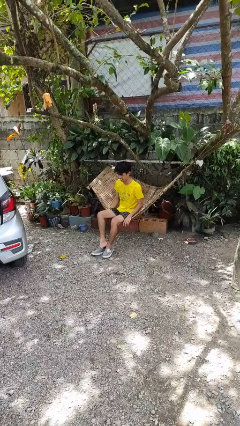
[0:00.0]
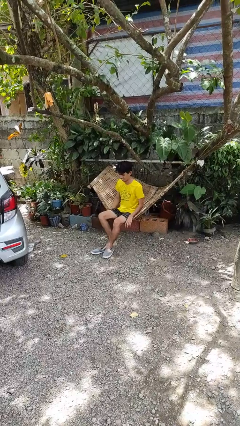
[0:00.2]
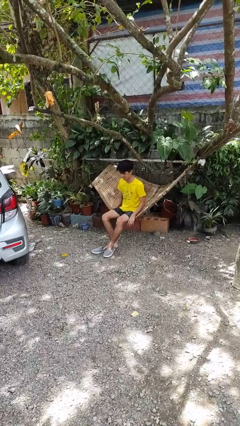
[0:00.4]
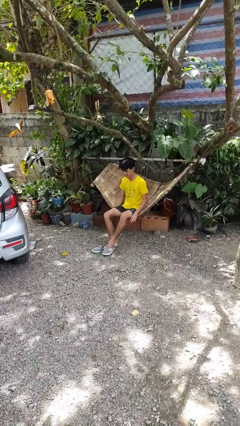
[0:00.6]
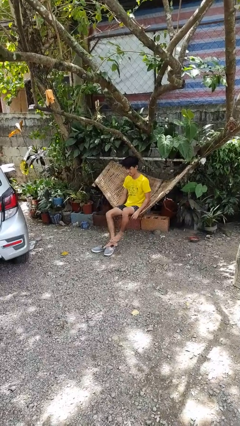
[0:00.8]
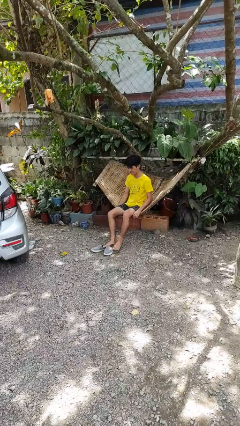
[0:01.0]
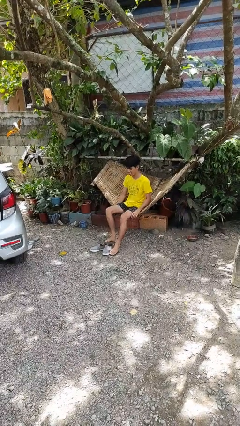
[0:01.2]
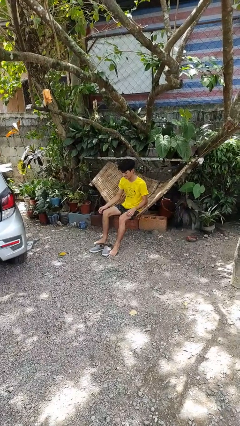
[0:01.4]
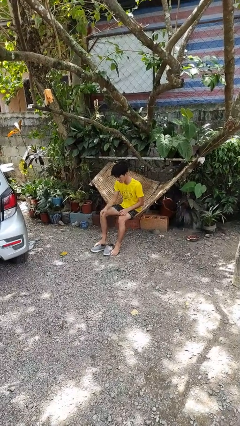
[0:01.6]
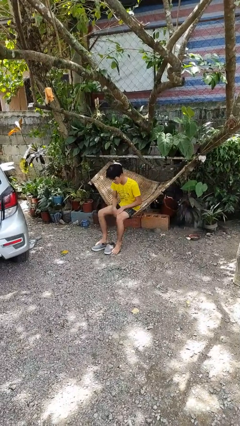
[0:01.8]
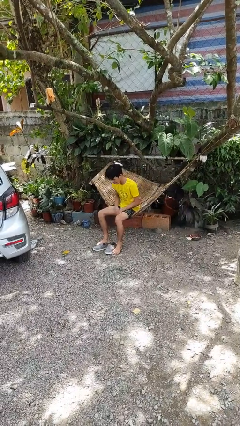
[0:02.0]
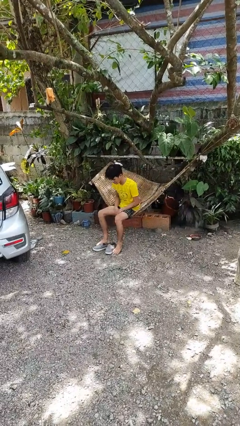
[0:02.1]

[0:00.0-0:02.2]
person takes off shoes

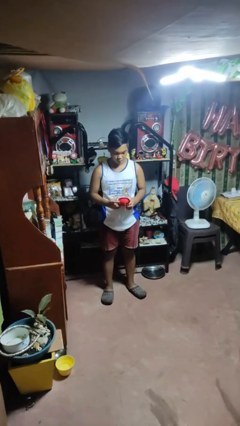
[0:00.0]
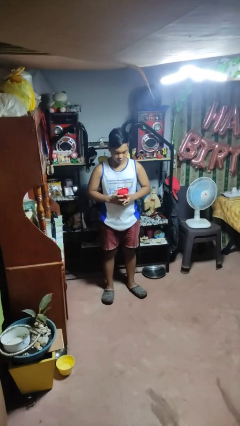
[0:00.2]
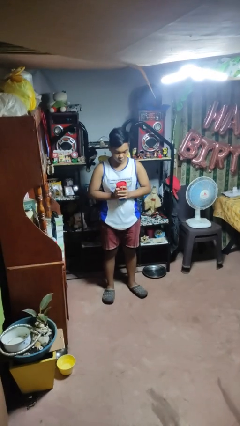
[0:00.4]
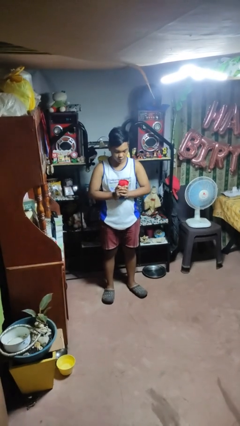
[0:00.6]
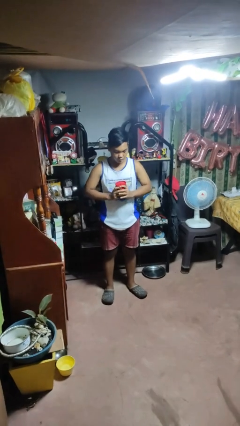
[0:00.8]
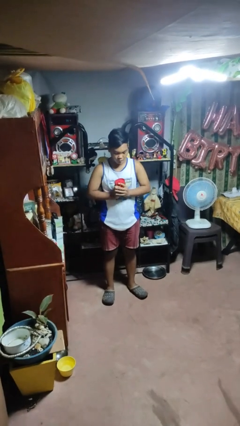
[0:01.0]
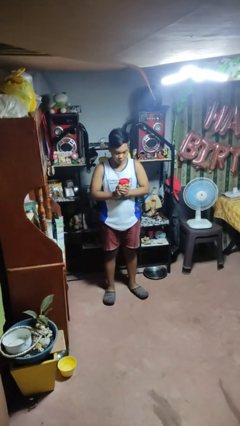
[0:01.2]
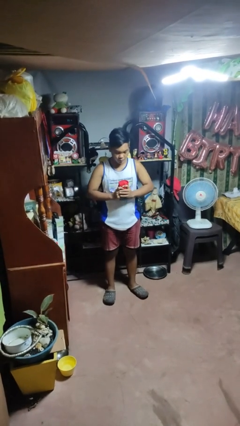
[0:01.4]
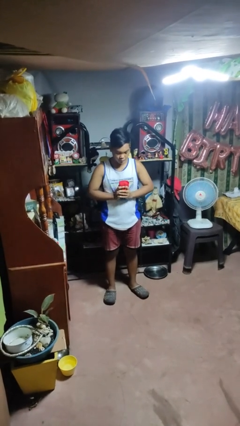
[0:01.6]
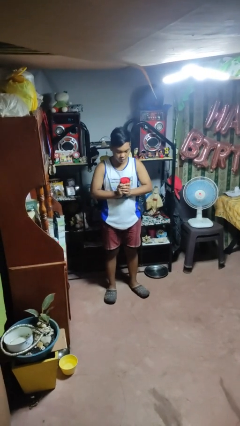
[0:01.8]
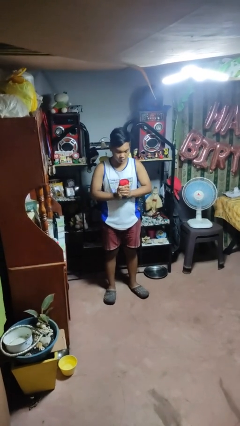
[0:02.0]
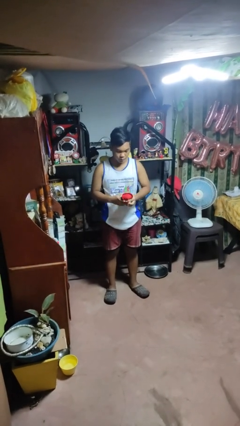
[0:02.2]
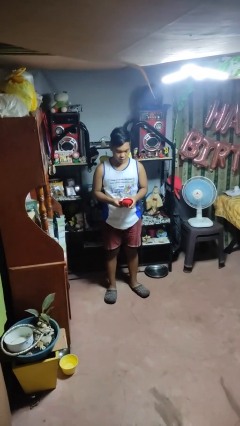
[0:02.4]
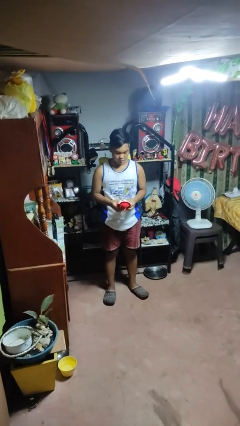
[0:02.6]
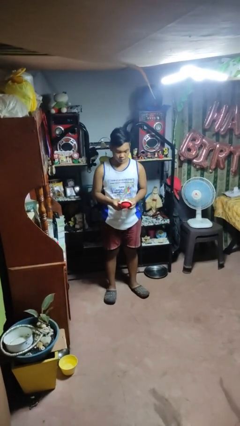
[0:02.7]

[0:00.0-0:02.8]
person squeezes object

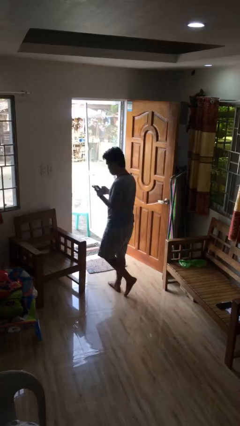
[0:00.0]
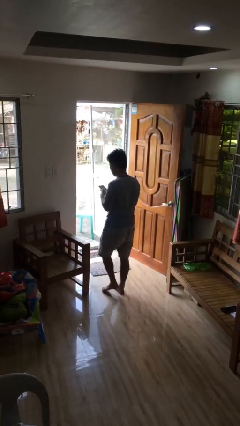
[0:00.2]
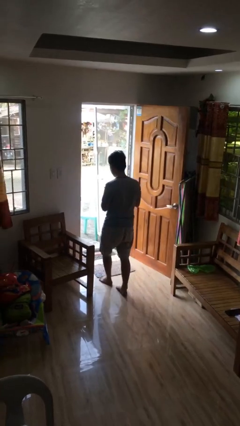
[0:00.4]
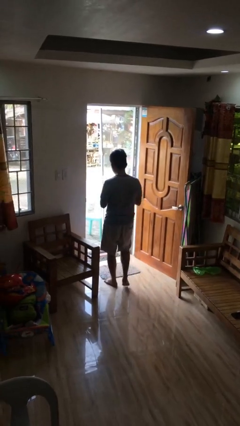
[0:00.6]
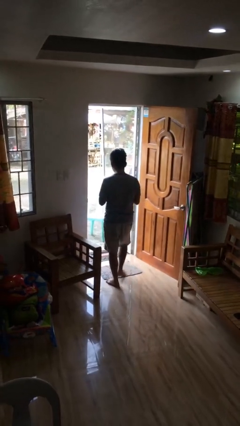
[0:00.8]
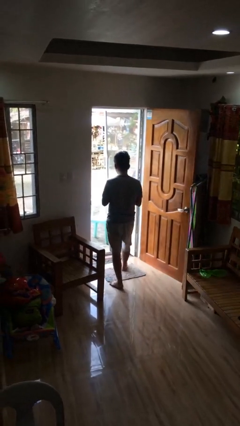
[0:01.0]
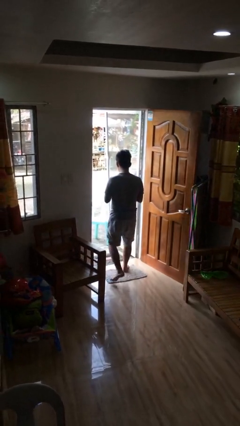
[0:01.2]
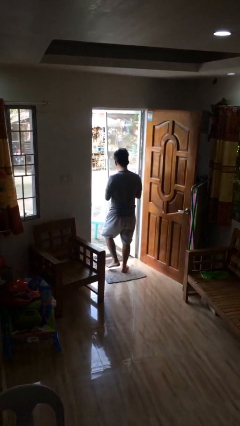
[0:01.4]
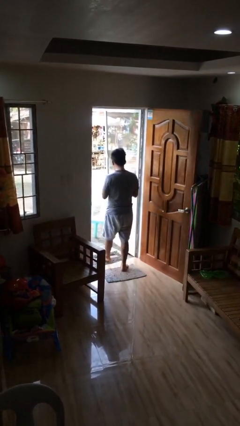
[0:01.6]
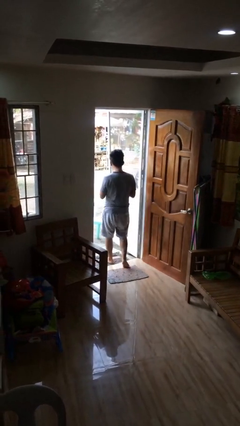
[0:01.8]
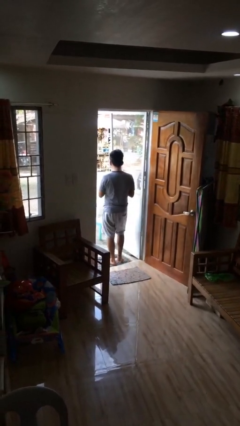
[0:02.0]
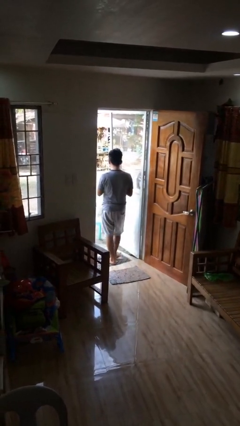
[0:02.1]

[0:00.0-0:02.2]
person exits scene through structure

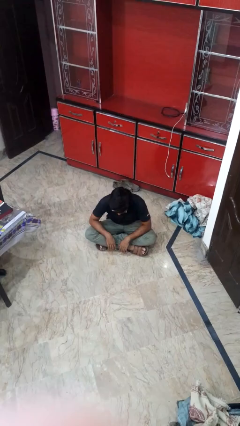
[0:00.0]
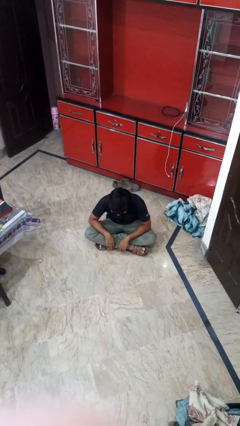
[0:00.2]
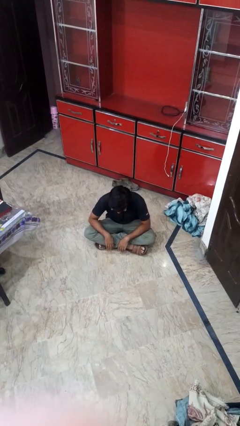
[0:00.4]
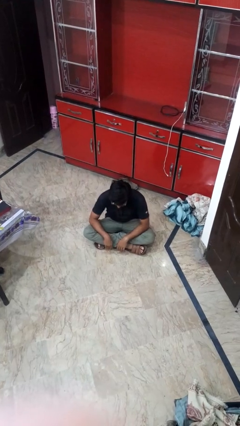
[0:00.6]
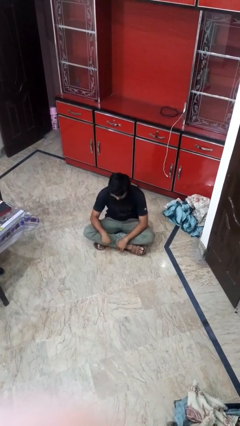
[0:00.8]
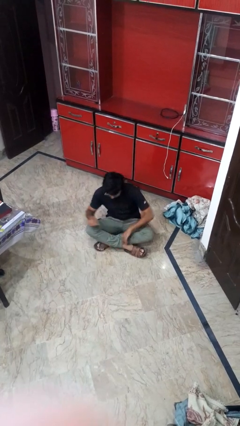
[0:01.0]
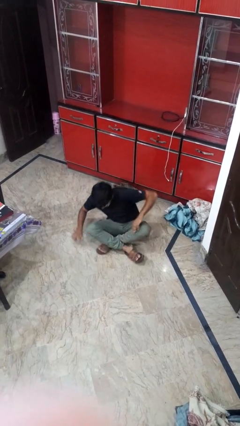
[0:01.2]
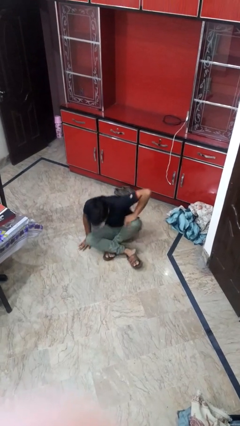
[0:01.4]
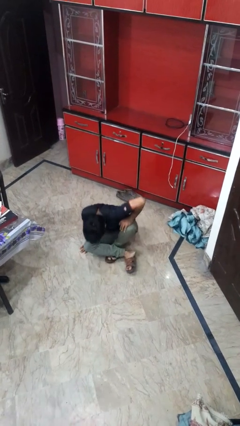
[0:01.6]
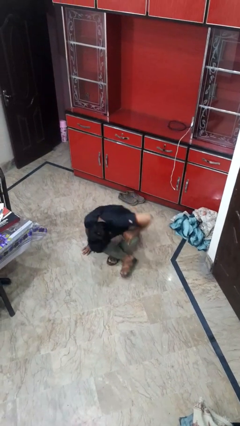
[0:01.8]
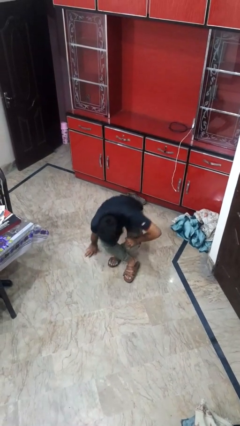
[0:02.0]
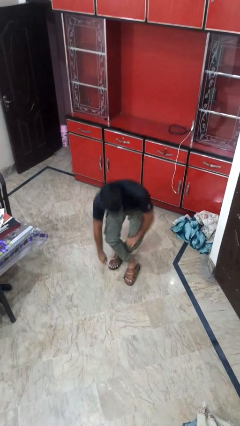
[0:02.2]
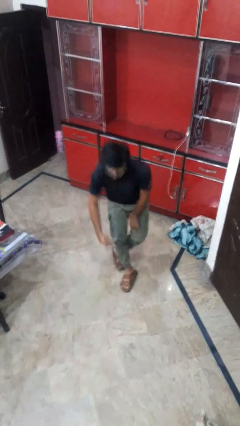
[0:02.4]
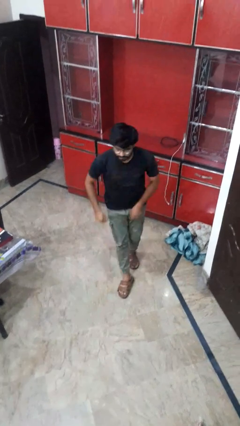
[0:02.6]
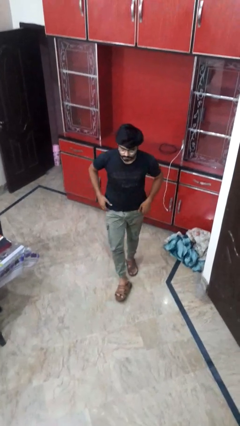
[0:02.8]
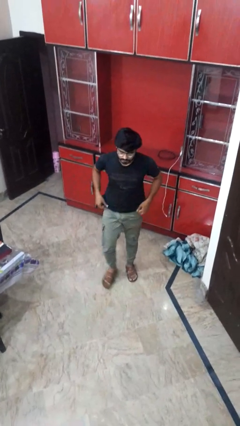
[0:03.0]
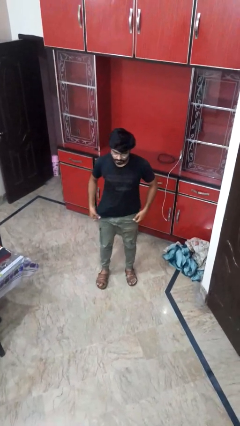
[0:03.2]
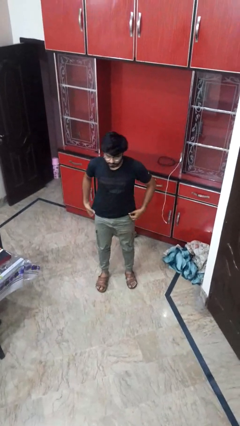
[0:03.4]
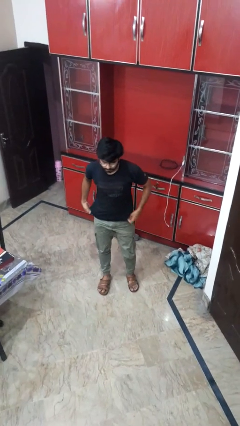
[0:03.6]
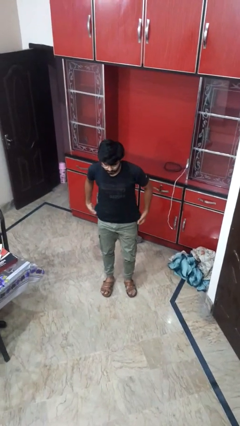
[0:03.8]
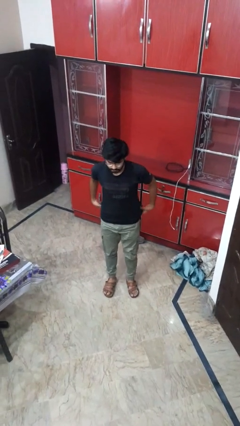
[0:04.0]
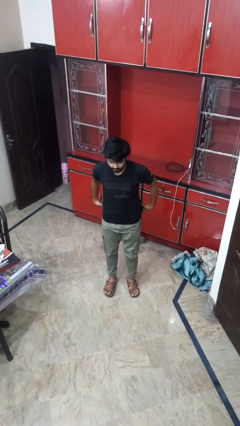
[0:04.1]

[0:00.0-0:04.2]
person stands up from floor

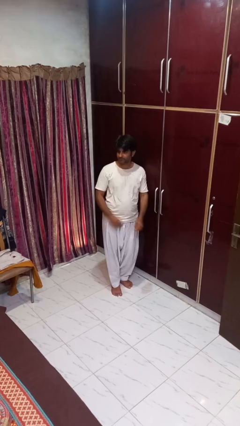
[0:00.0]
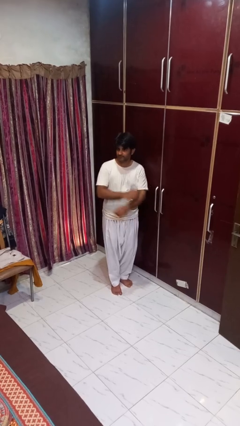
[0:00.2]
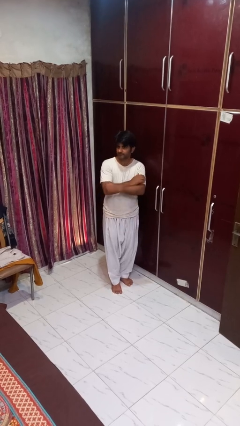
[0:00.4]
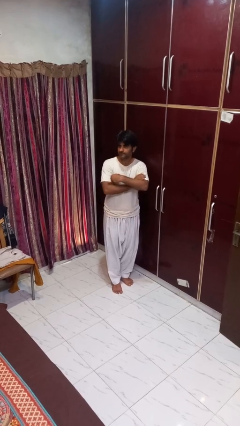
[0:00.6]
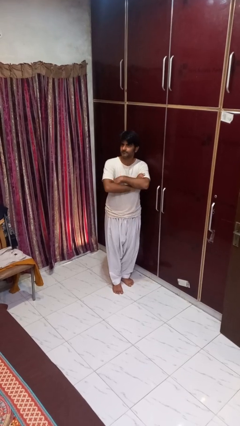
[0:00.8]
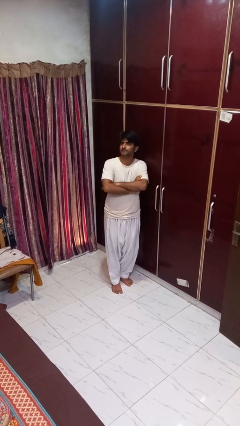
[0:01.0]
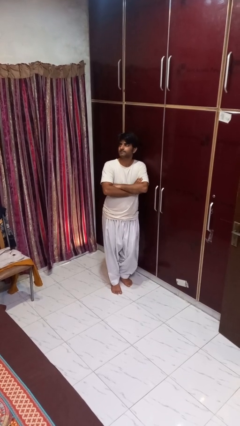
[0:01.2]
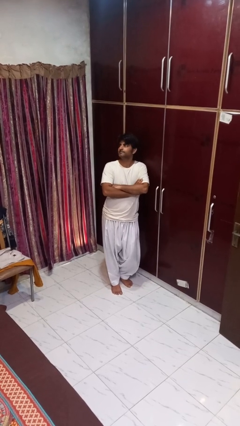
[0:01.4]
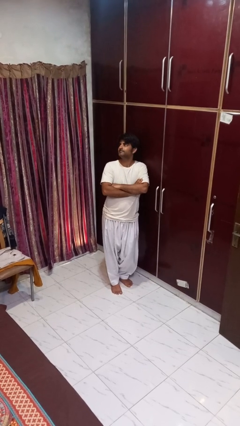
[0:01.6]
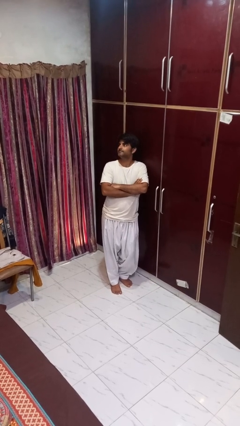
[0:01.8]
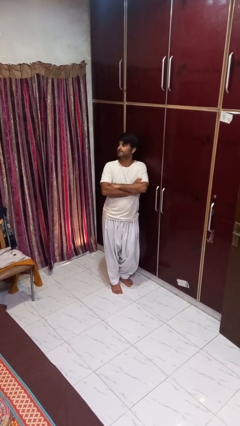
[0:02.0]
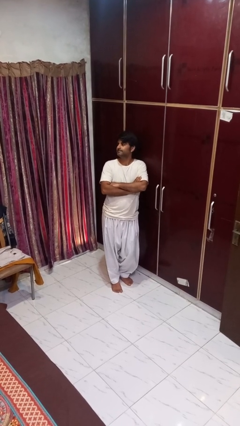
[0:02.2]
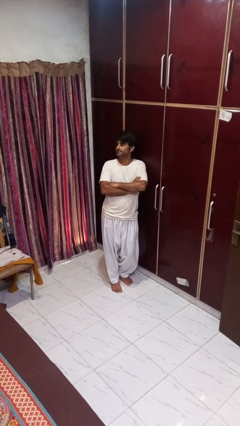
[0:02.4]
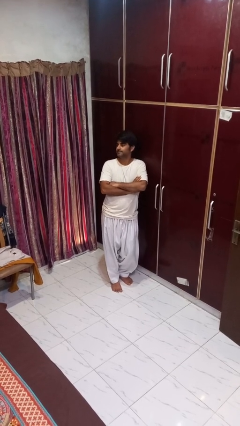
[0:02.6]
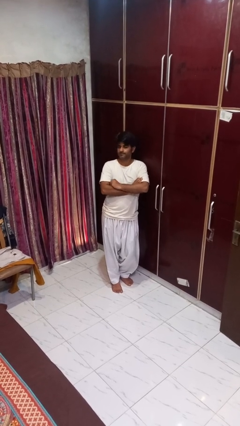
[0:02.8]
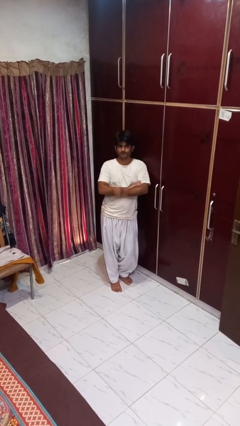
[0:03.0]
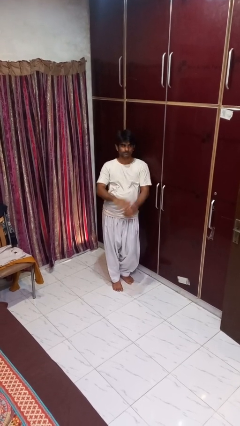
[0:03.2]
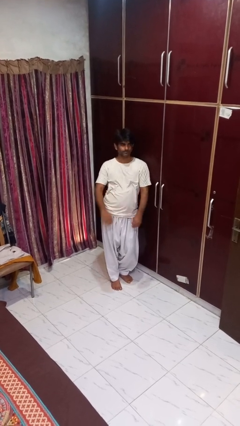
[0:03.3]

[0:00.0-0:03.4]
person crosses arms

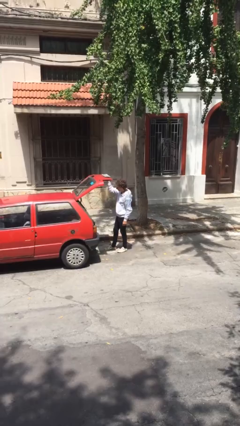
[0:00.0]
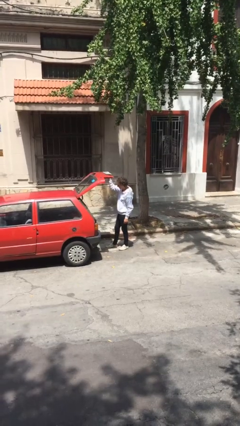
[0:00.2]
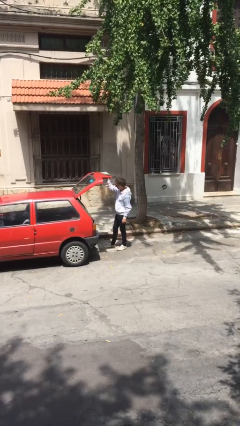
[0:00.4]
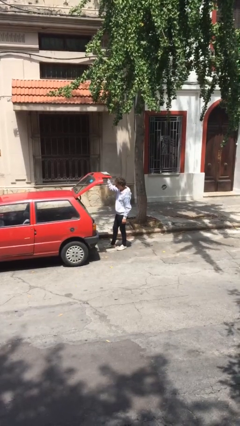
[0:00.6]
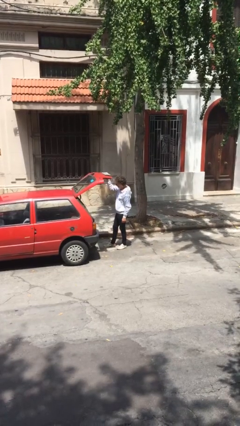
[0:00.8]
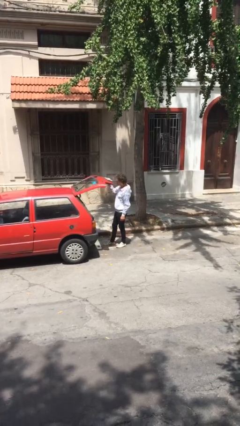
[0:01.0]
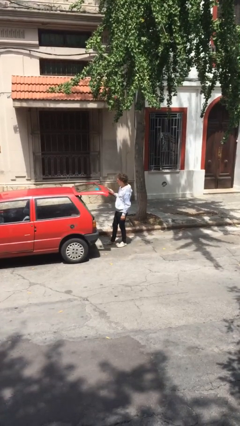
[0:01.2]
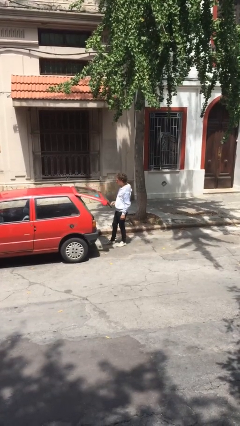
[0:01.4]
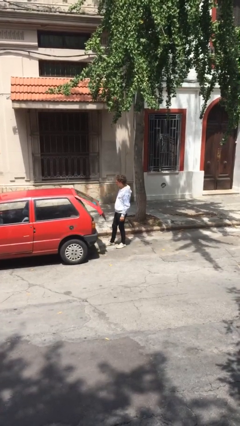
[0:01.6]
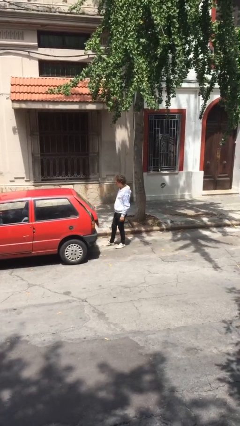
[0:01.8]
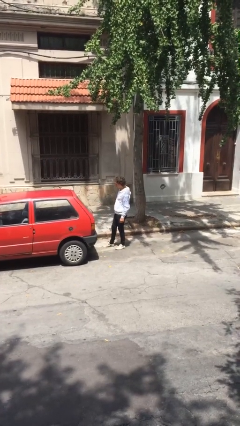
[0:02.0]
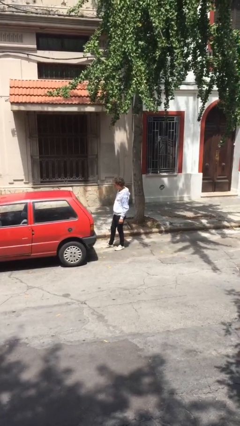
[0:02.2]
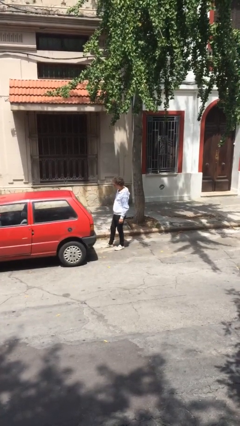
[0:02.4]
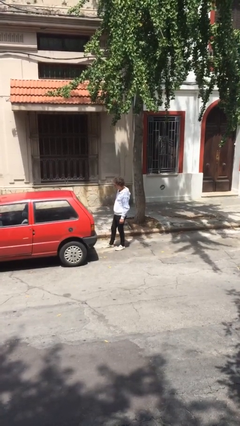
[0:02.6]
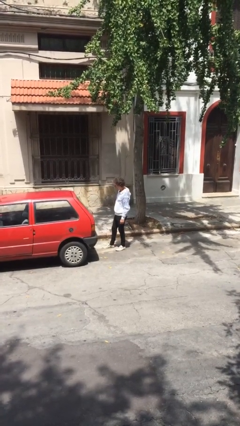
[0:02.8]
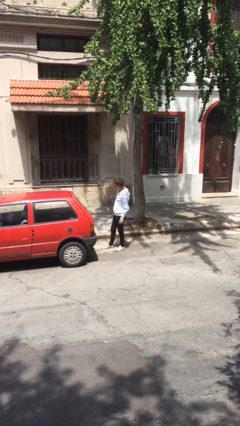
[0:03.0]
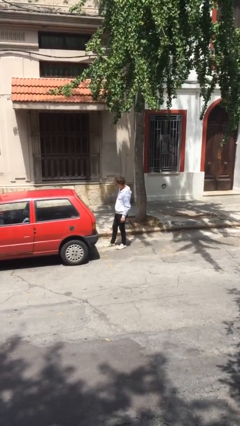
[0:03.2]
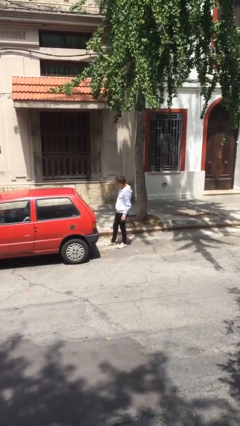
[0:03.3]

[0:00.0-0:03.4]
person closes car trunk
